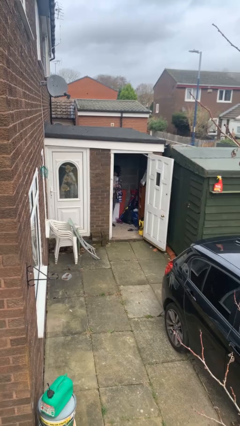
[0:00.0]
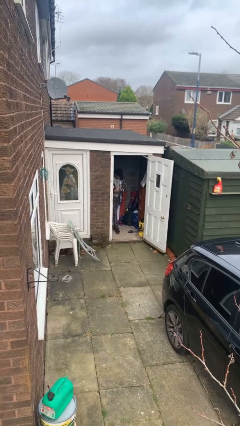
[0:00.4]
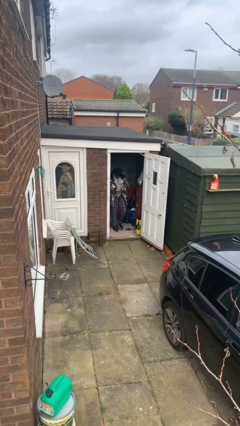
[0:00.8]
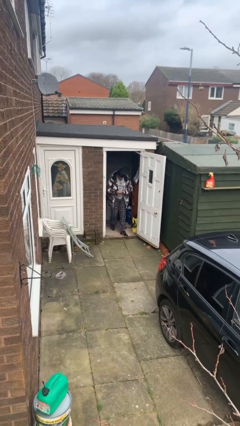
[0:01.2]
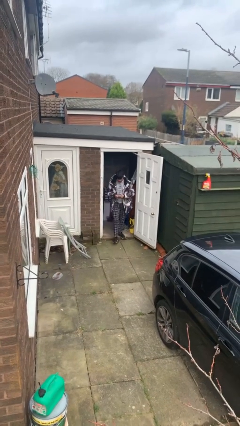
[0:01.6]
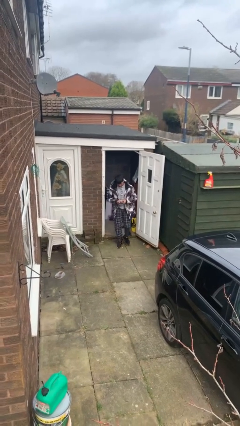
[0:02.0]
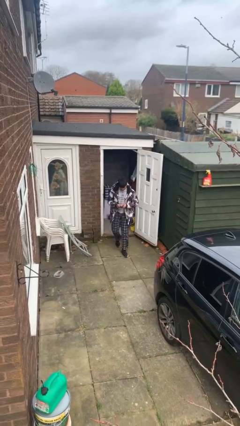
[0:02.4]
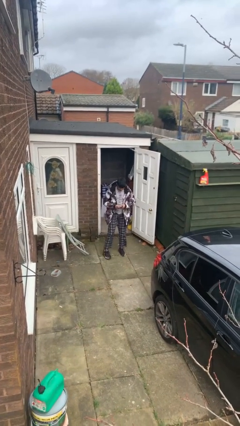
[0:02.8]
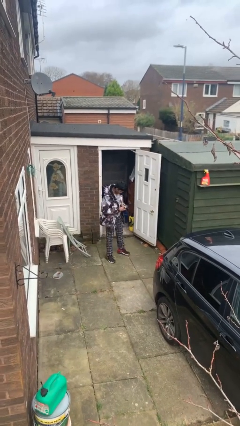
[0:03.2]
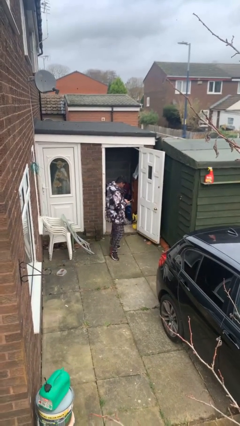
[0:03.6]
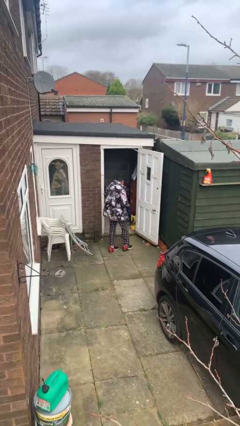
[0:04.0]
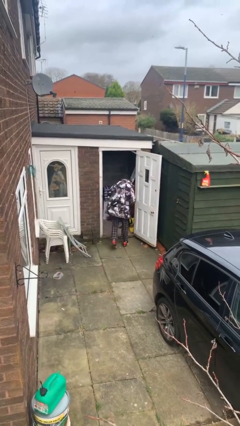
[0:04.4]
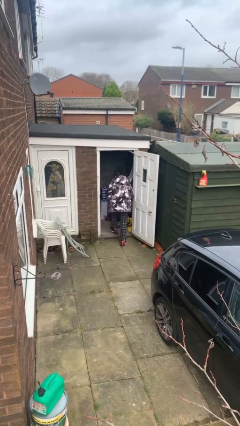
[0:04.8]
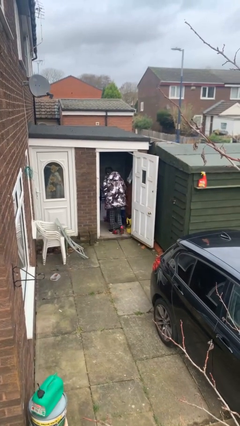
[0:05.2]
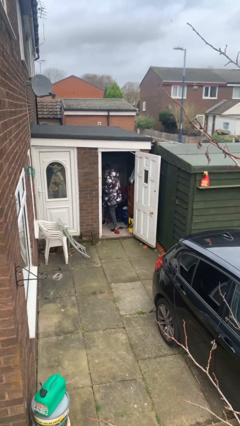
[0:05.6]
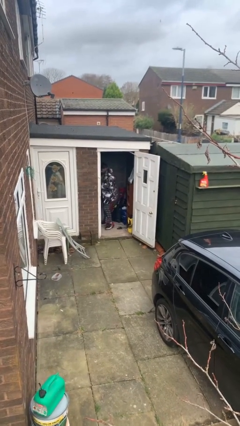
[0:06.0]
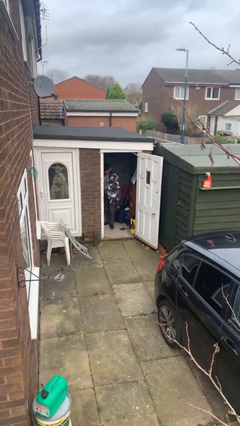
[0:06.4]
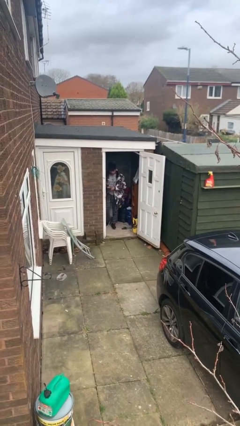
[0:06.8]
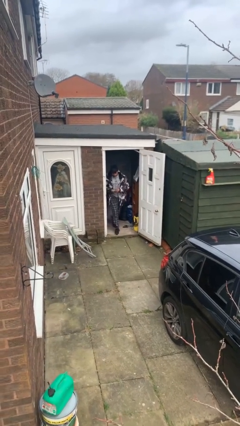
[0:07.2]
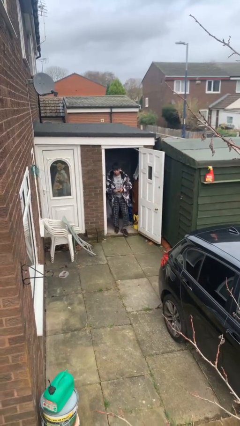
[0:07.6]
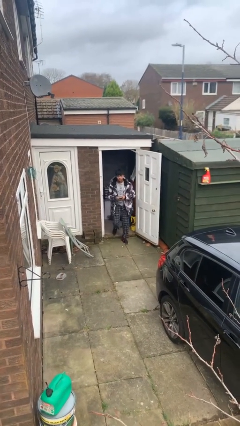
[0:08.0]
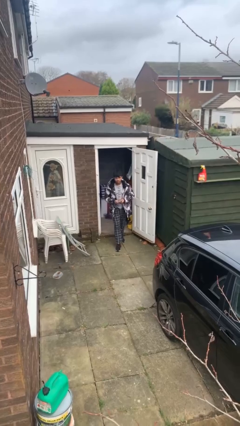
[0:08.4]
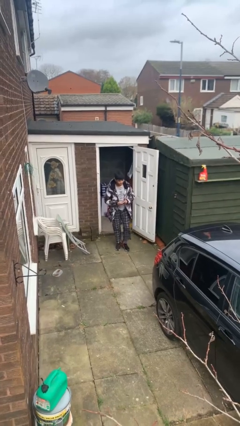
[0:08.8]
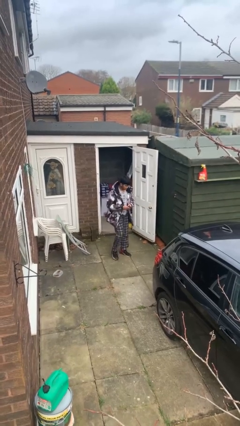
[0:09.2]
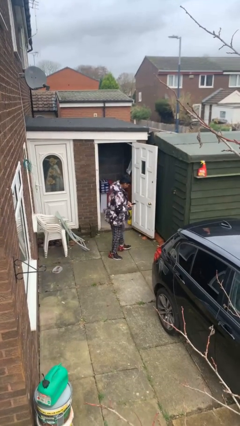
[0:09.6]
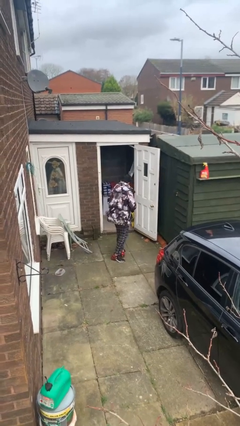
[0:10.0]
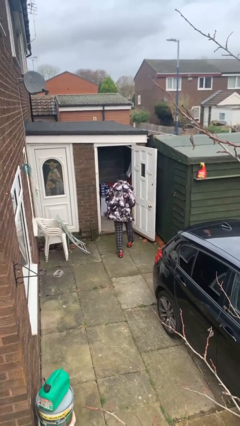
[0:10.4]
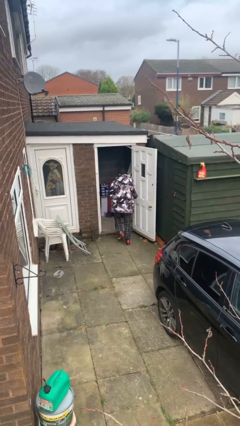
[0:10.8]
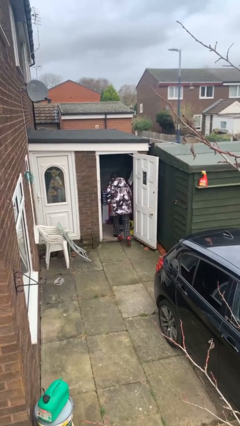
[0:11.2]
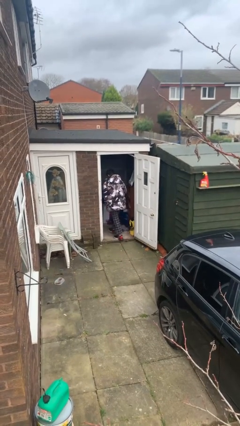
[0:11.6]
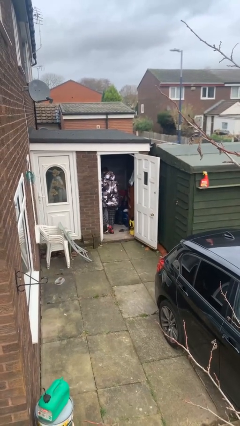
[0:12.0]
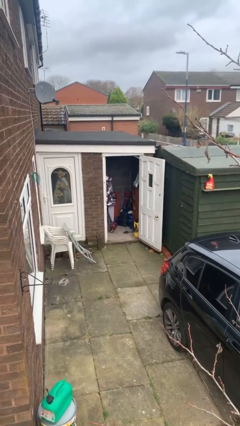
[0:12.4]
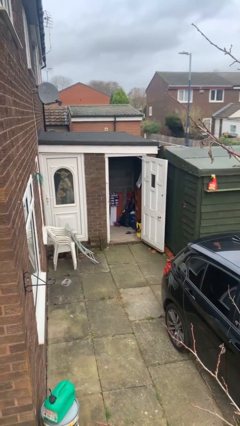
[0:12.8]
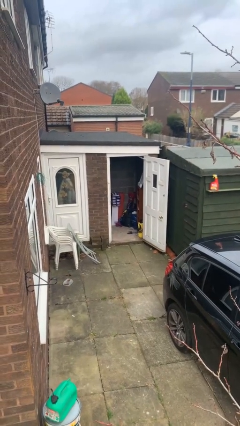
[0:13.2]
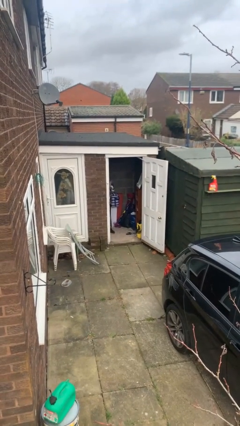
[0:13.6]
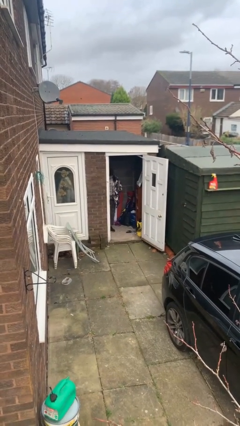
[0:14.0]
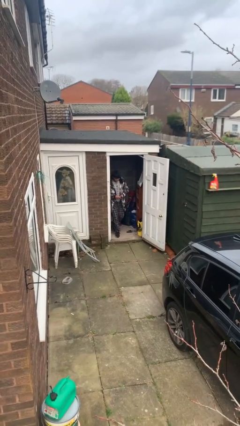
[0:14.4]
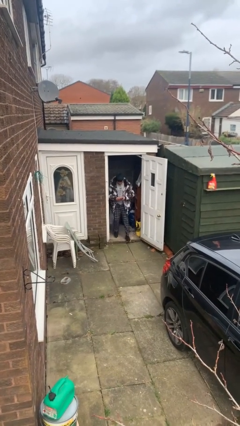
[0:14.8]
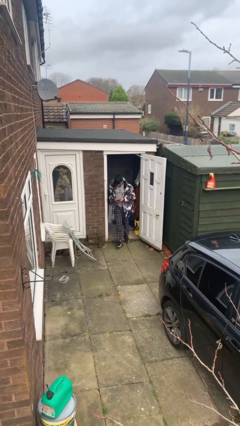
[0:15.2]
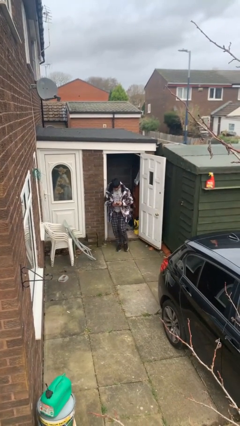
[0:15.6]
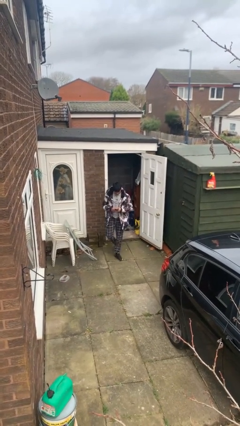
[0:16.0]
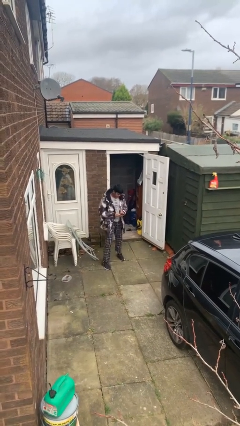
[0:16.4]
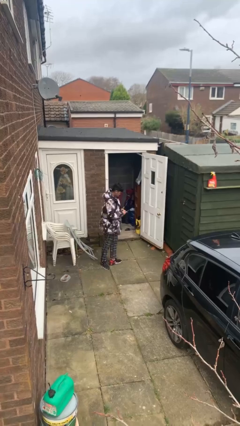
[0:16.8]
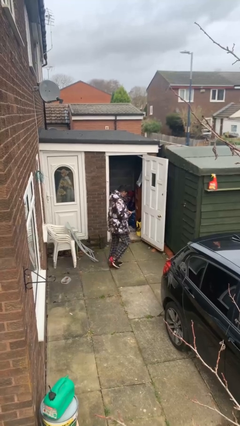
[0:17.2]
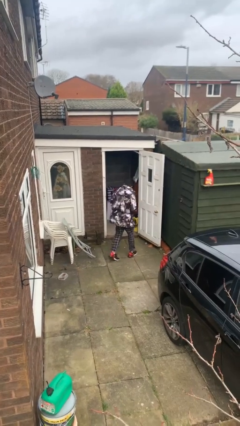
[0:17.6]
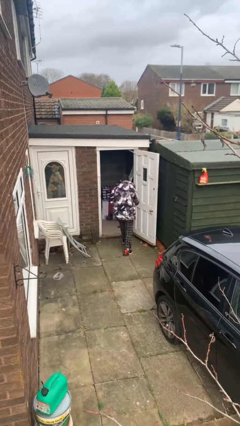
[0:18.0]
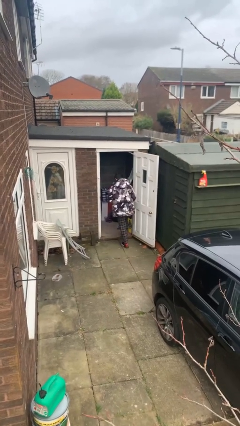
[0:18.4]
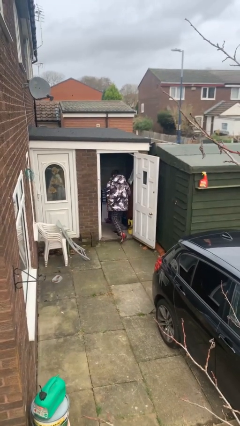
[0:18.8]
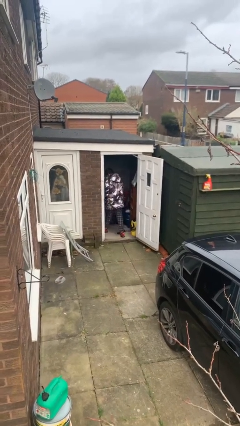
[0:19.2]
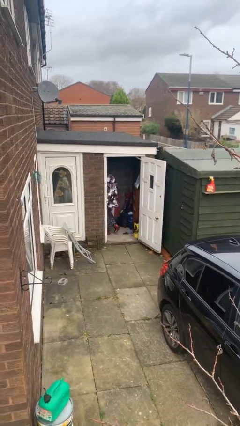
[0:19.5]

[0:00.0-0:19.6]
person texts on phone

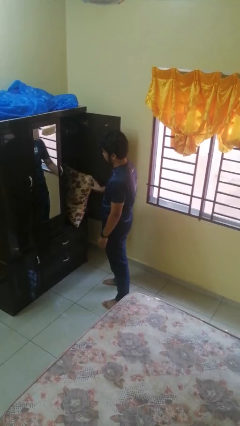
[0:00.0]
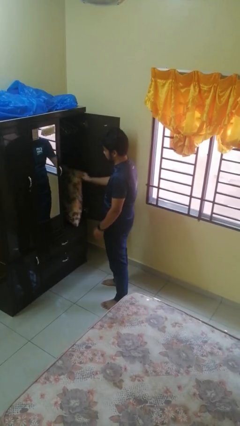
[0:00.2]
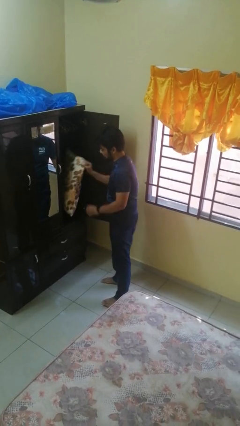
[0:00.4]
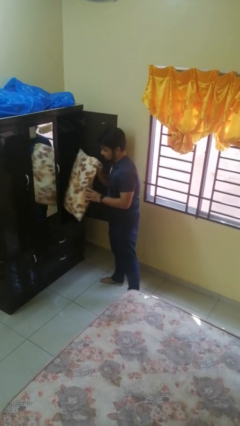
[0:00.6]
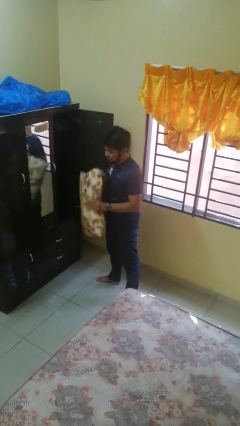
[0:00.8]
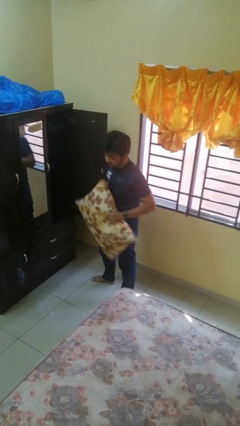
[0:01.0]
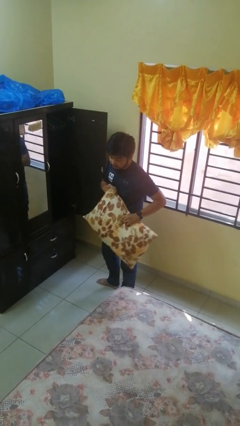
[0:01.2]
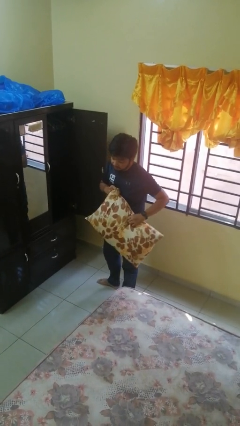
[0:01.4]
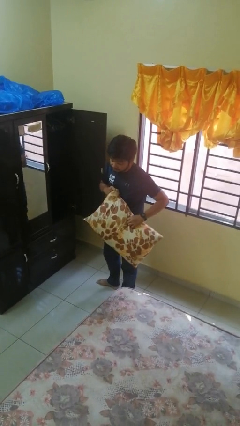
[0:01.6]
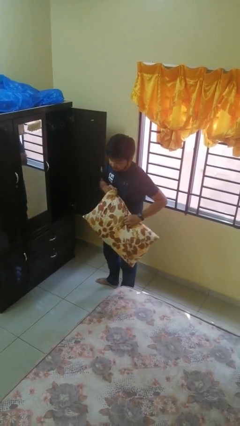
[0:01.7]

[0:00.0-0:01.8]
person picks up object from cabinet

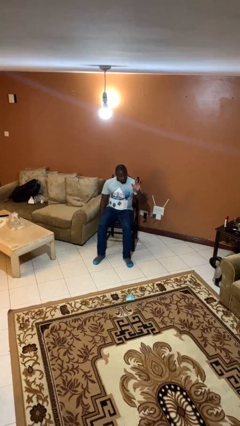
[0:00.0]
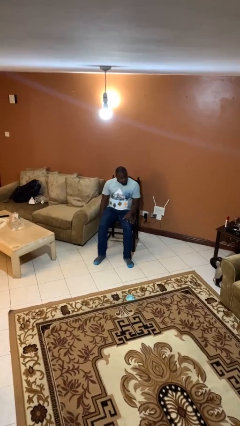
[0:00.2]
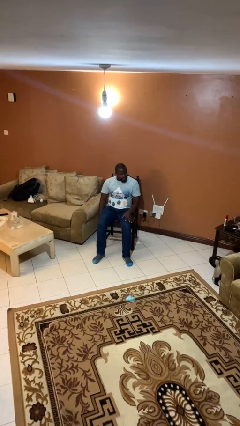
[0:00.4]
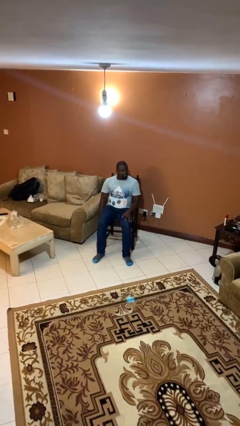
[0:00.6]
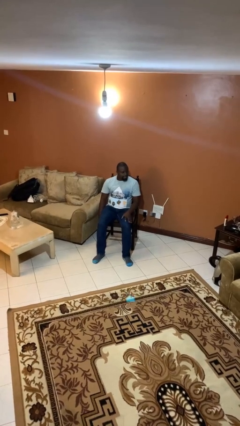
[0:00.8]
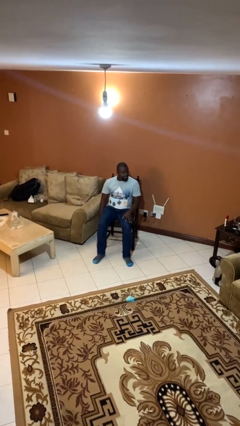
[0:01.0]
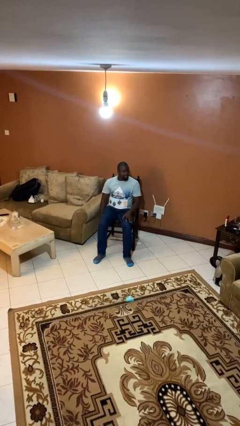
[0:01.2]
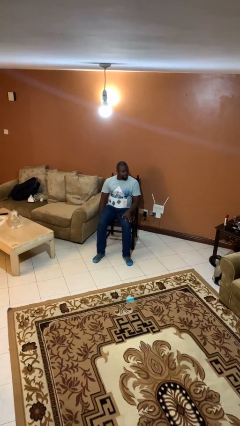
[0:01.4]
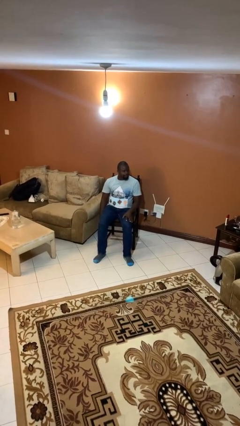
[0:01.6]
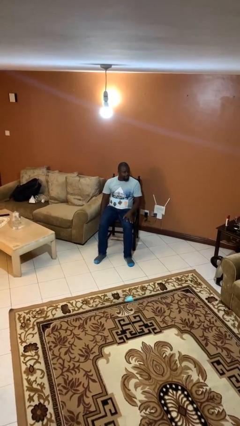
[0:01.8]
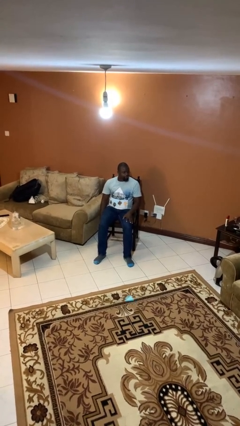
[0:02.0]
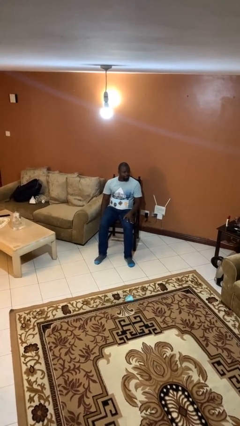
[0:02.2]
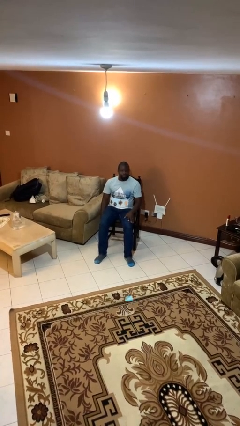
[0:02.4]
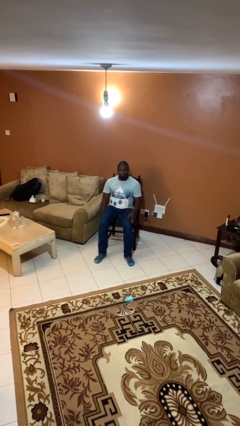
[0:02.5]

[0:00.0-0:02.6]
person slaps hands on thighs

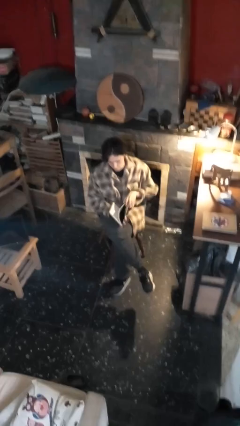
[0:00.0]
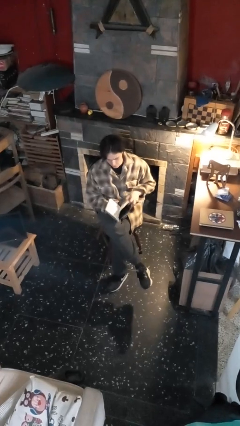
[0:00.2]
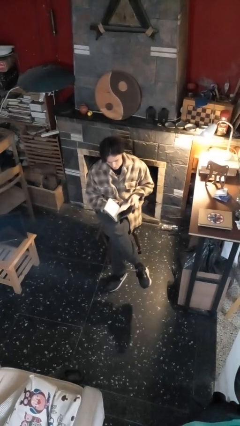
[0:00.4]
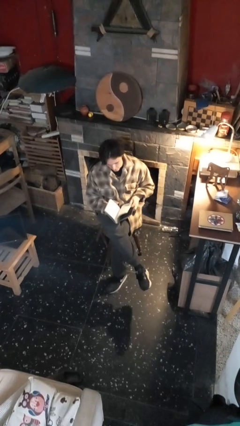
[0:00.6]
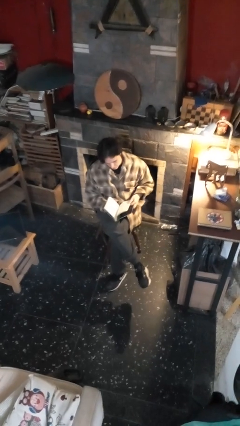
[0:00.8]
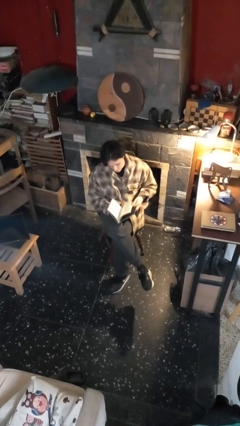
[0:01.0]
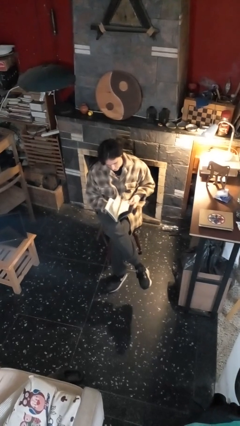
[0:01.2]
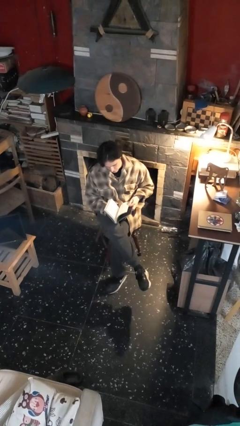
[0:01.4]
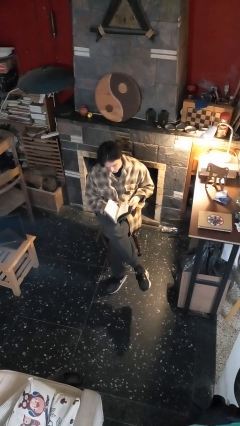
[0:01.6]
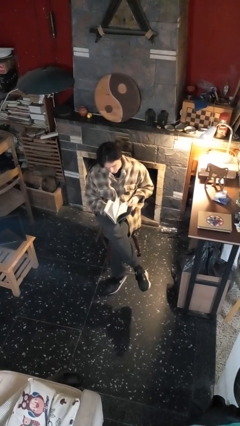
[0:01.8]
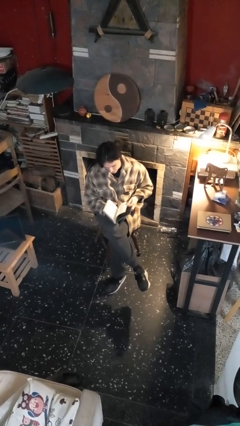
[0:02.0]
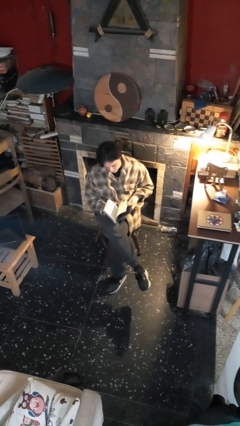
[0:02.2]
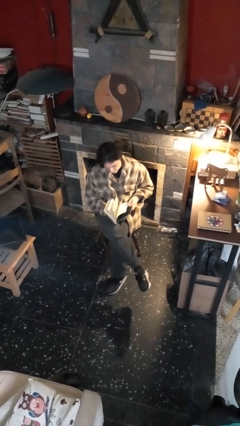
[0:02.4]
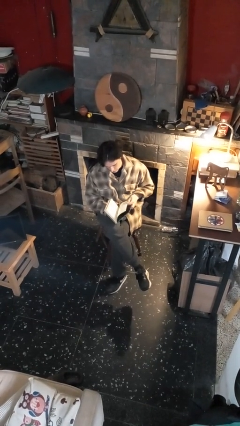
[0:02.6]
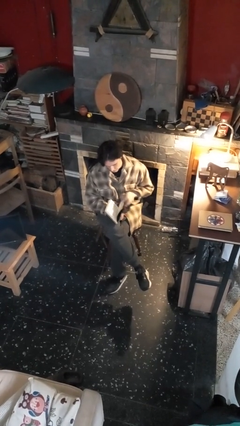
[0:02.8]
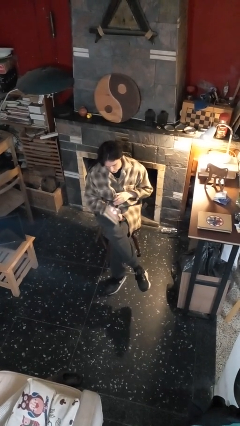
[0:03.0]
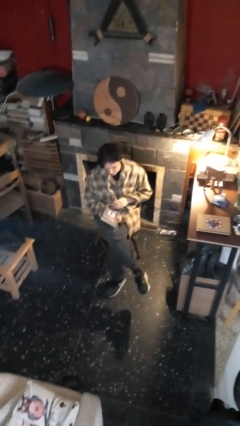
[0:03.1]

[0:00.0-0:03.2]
person reads book
